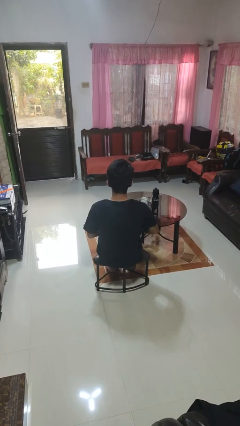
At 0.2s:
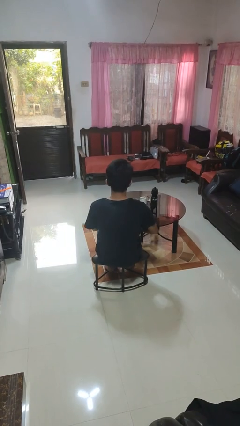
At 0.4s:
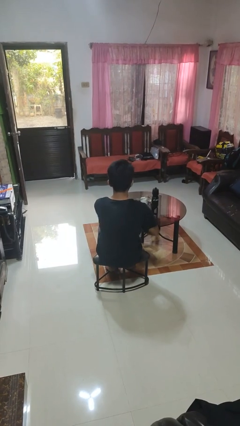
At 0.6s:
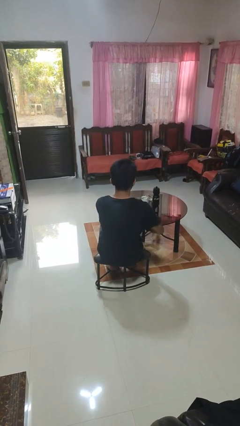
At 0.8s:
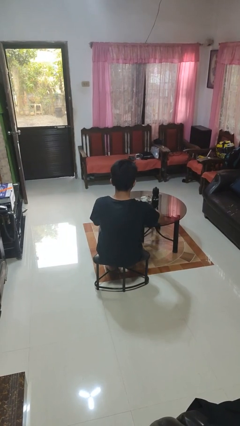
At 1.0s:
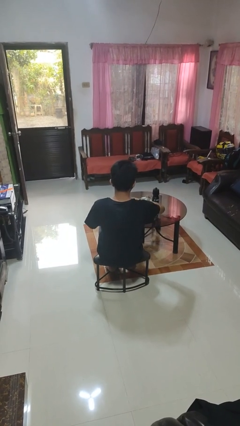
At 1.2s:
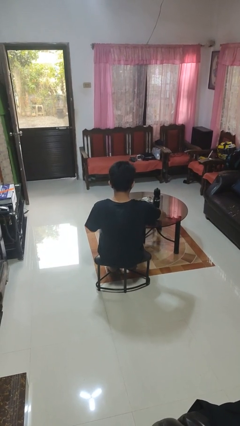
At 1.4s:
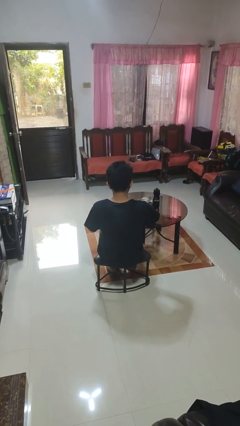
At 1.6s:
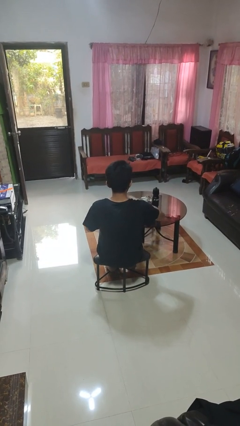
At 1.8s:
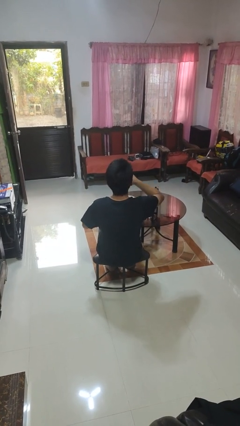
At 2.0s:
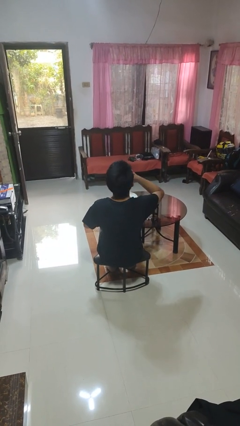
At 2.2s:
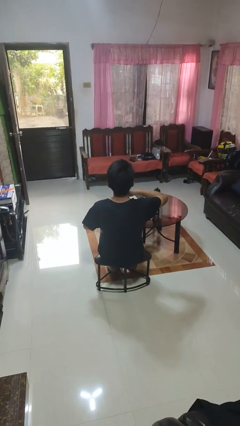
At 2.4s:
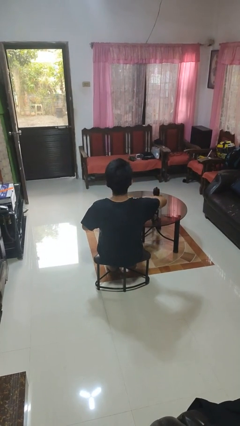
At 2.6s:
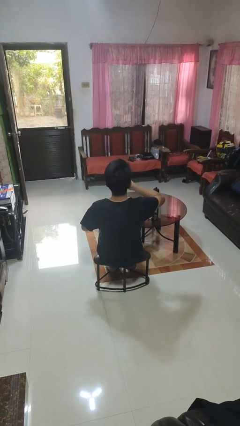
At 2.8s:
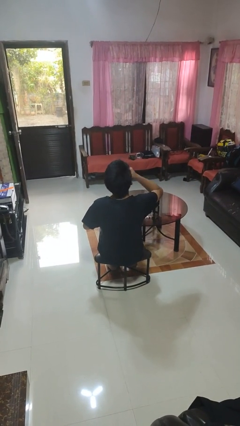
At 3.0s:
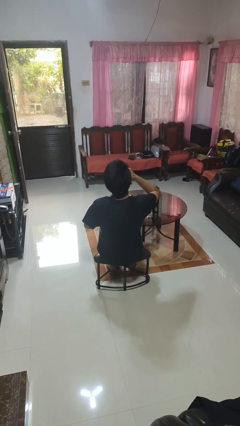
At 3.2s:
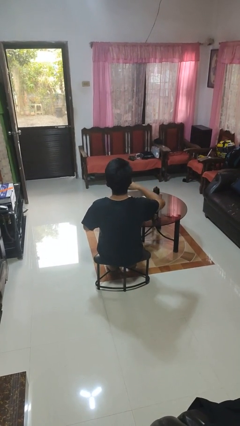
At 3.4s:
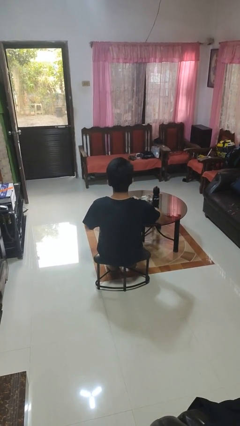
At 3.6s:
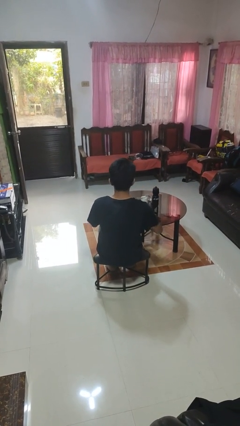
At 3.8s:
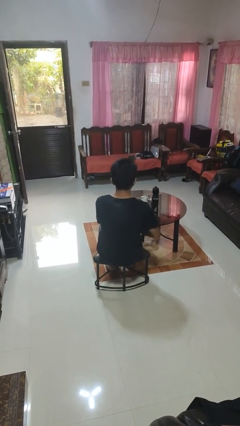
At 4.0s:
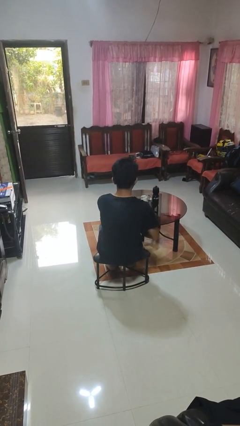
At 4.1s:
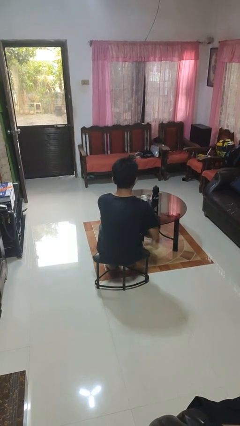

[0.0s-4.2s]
person eats with hands

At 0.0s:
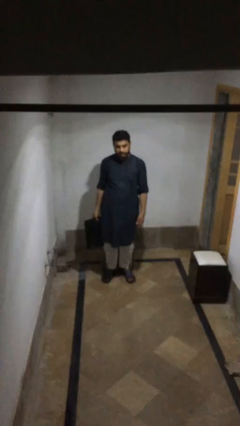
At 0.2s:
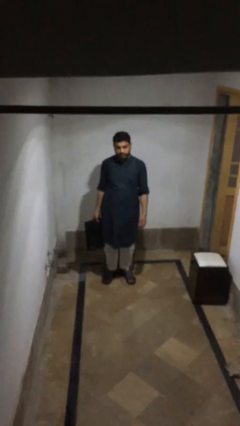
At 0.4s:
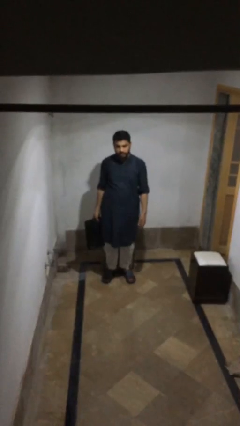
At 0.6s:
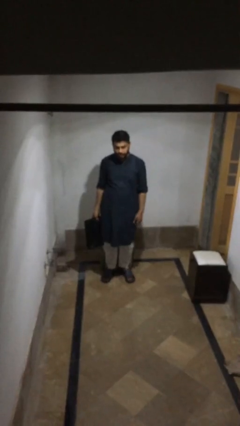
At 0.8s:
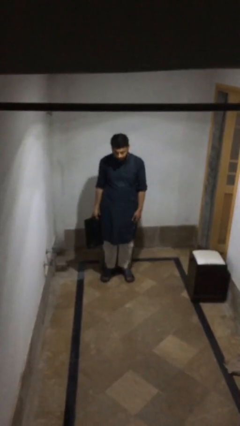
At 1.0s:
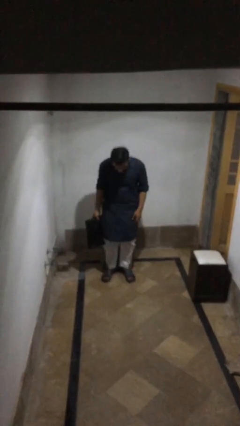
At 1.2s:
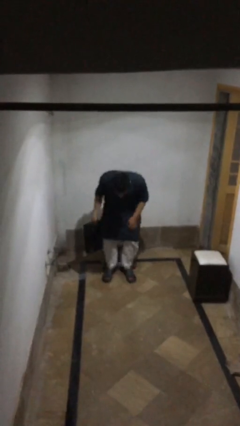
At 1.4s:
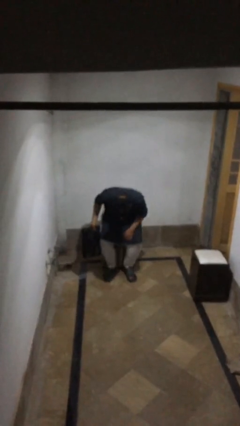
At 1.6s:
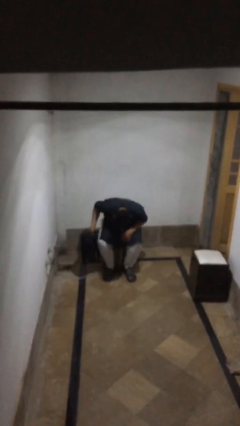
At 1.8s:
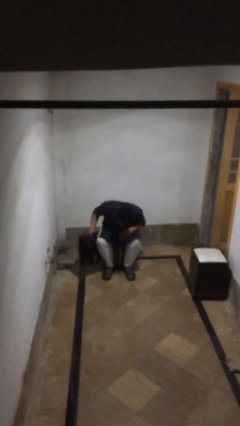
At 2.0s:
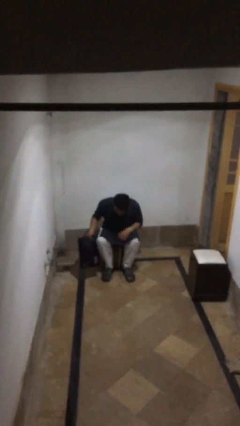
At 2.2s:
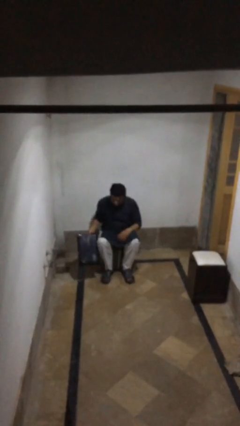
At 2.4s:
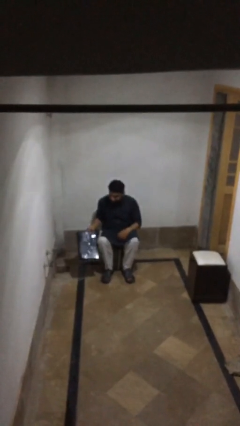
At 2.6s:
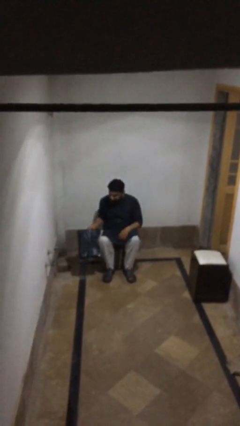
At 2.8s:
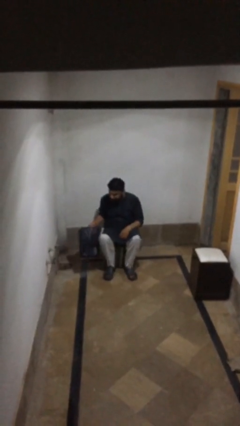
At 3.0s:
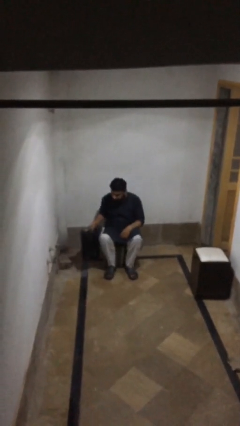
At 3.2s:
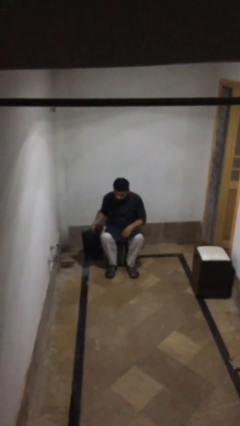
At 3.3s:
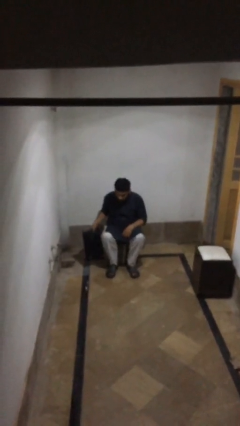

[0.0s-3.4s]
person sits down

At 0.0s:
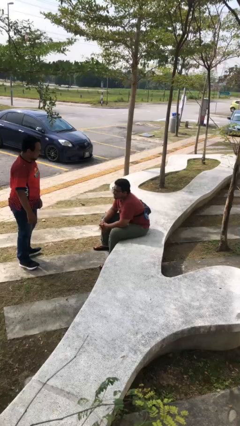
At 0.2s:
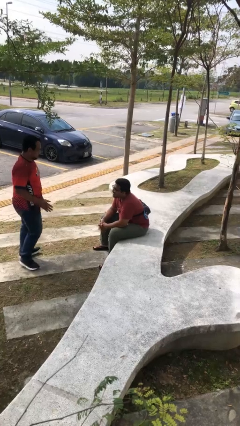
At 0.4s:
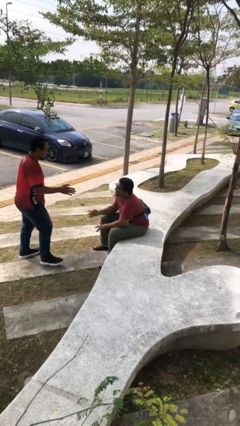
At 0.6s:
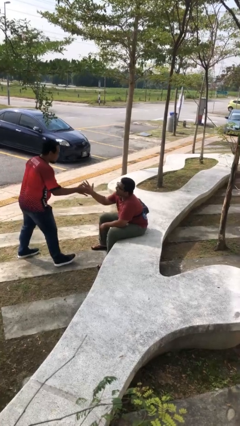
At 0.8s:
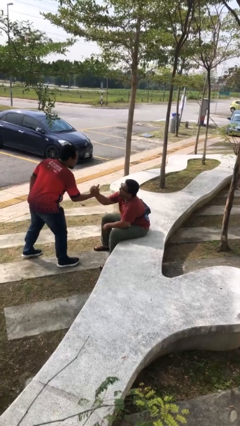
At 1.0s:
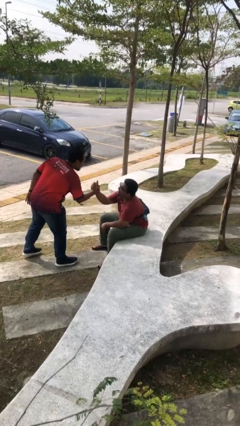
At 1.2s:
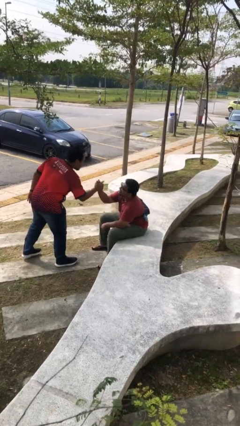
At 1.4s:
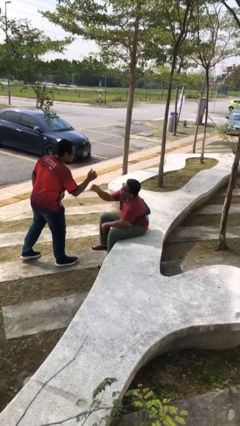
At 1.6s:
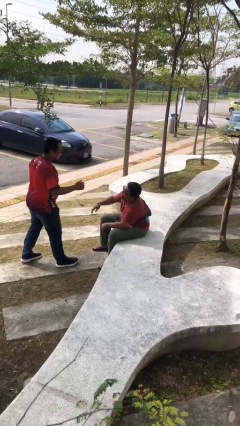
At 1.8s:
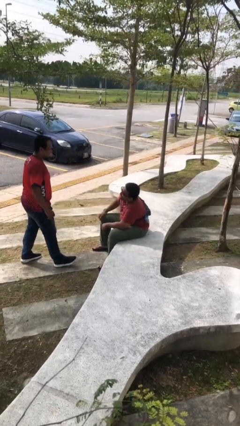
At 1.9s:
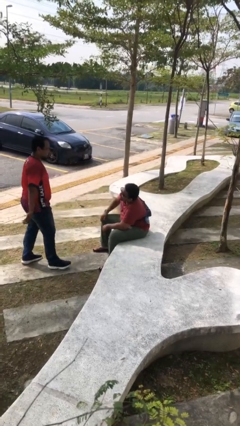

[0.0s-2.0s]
person shakes hand

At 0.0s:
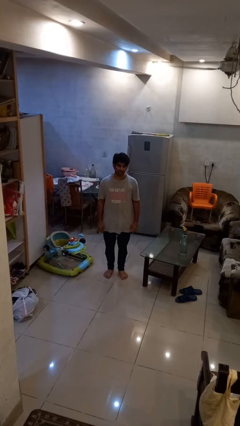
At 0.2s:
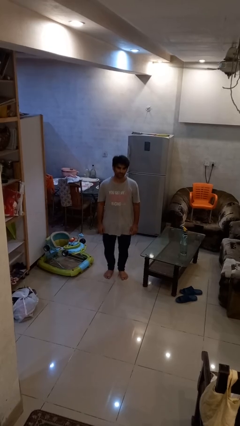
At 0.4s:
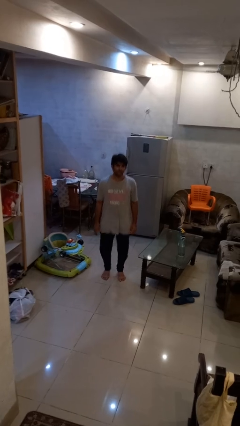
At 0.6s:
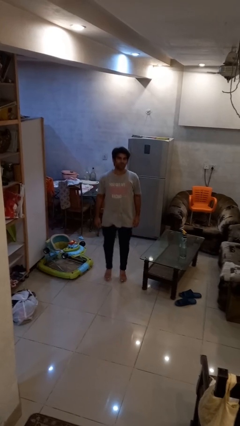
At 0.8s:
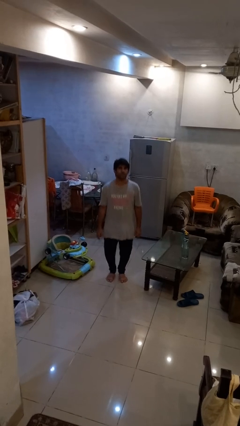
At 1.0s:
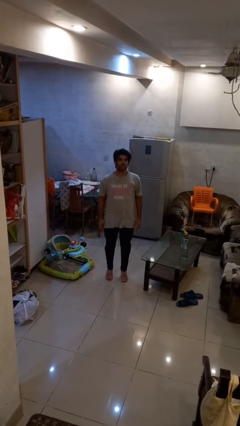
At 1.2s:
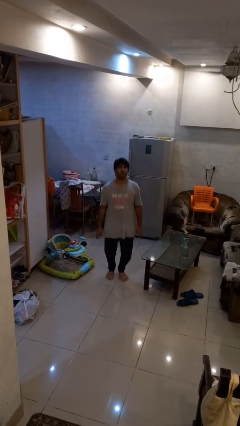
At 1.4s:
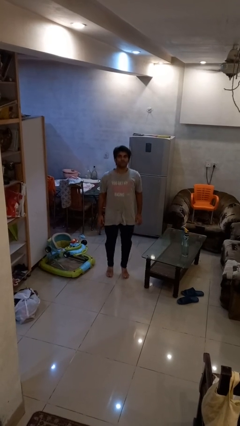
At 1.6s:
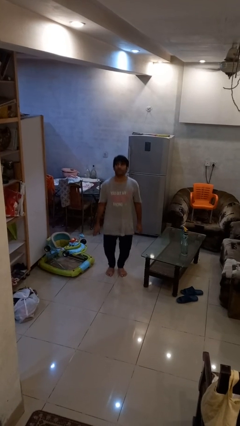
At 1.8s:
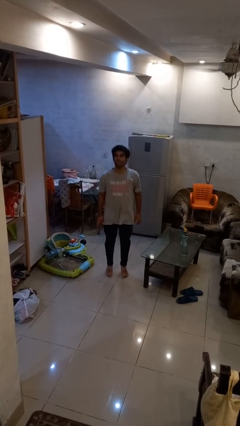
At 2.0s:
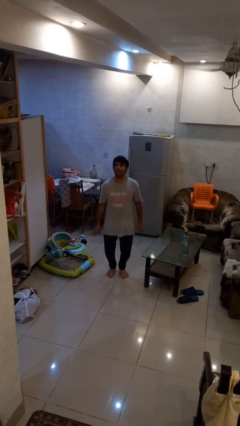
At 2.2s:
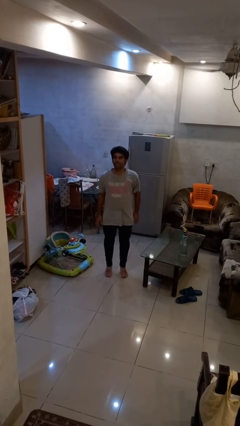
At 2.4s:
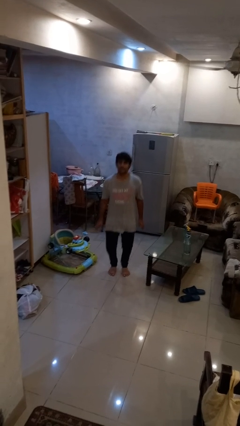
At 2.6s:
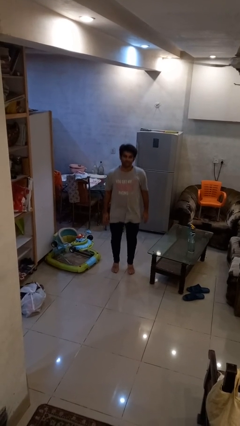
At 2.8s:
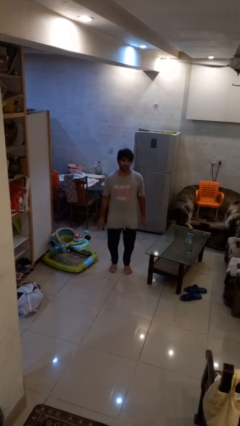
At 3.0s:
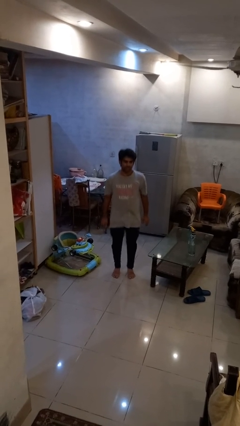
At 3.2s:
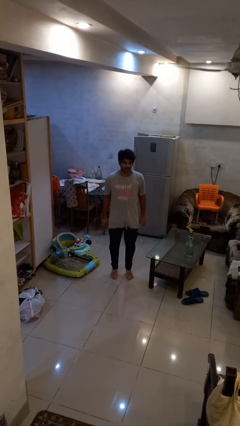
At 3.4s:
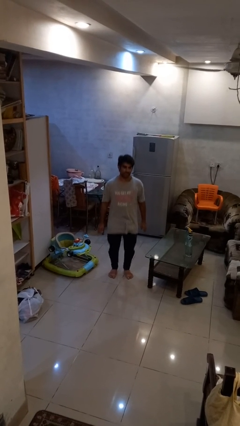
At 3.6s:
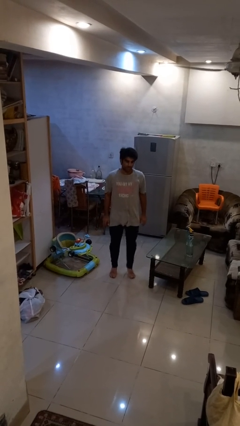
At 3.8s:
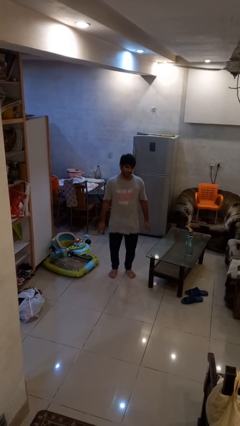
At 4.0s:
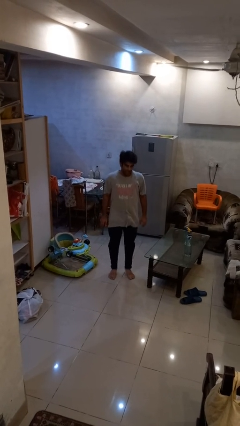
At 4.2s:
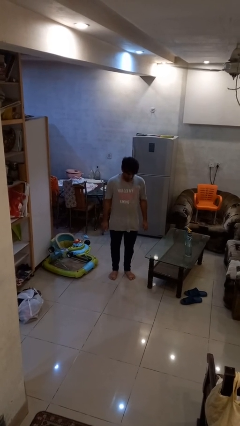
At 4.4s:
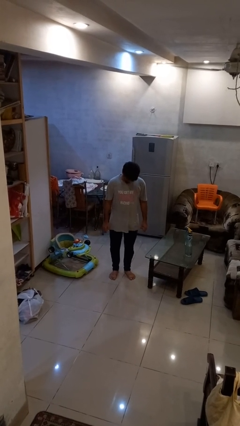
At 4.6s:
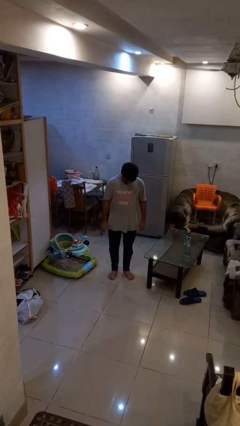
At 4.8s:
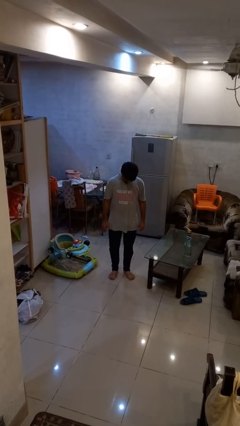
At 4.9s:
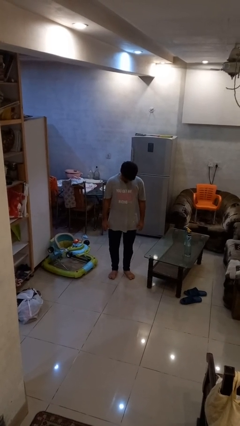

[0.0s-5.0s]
person jumps

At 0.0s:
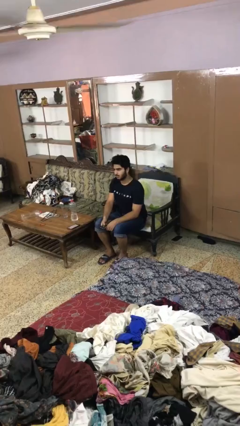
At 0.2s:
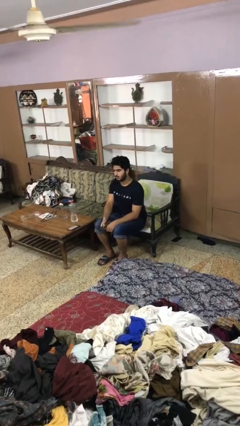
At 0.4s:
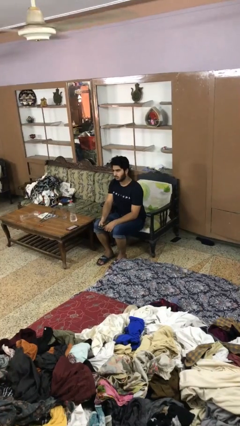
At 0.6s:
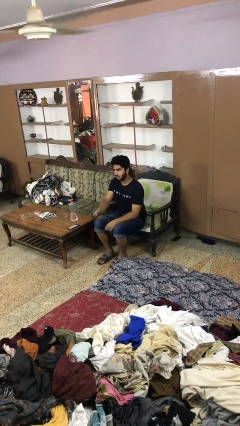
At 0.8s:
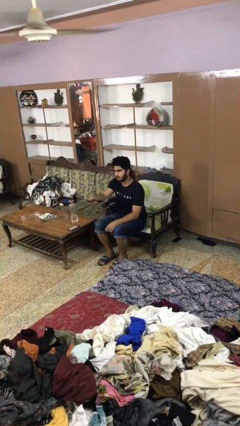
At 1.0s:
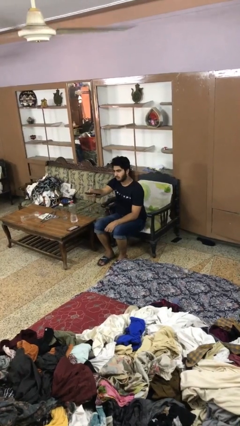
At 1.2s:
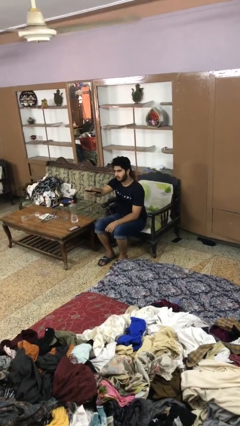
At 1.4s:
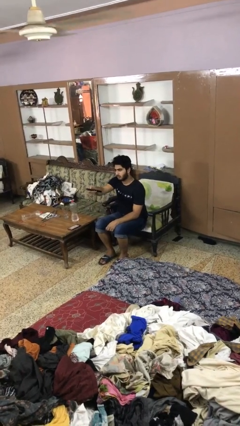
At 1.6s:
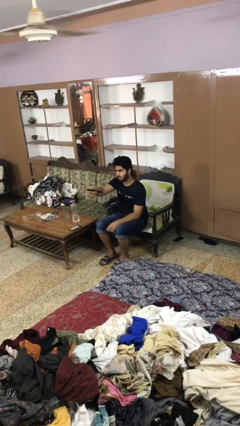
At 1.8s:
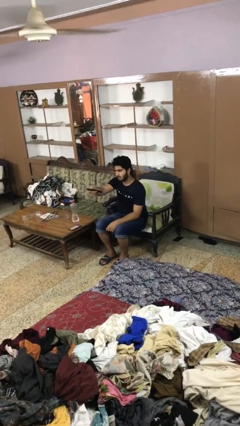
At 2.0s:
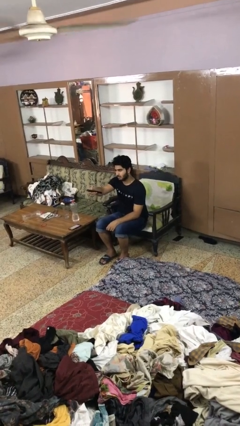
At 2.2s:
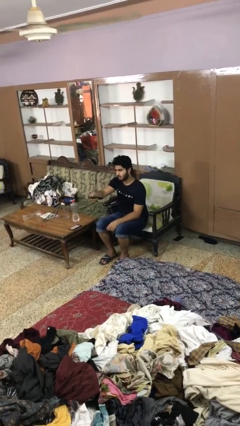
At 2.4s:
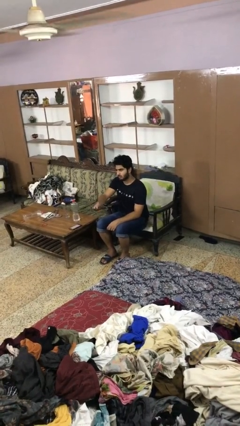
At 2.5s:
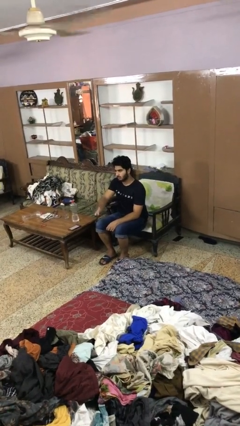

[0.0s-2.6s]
person uses television remote

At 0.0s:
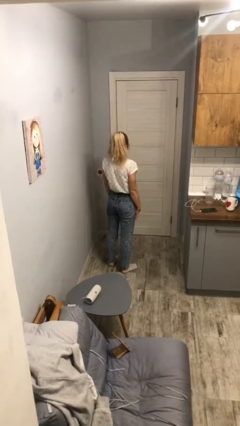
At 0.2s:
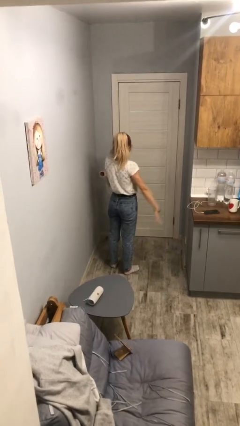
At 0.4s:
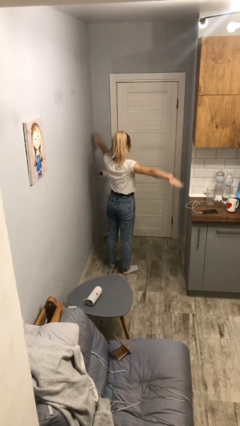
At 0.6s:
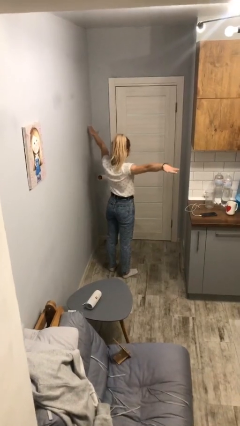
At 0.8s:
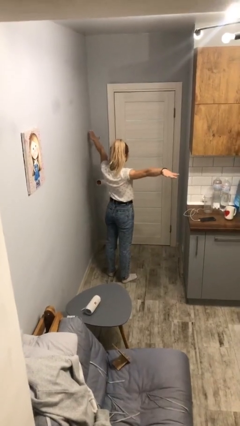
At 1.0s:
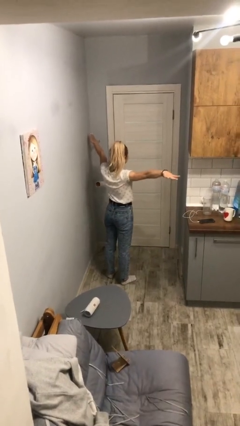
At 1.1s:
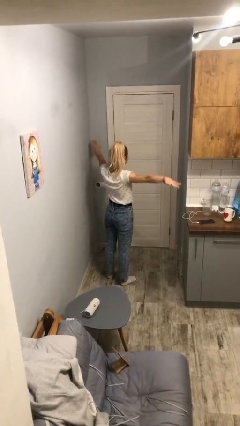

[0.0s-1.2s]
person stretches arms to side
